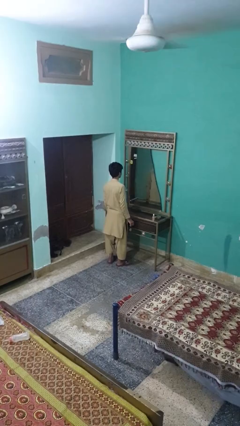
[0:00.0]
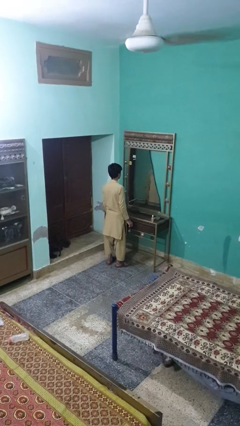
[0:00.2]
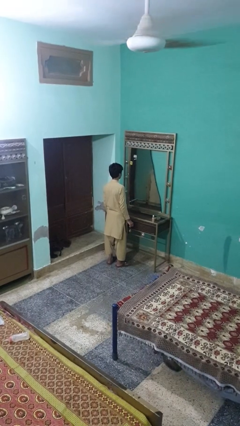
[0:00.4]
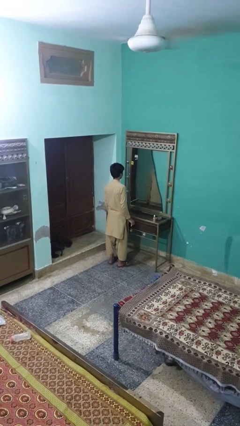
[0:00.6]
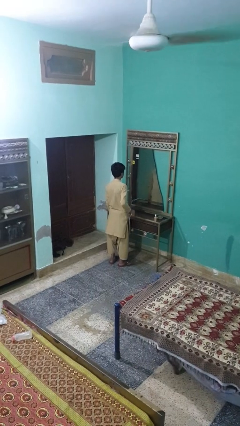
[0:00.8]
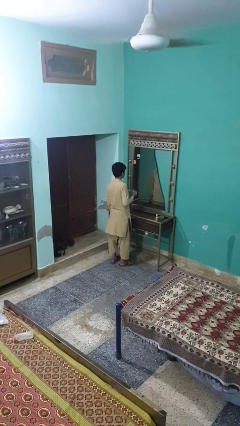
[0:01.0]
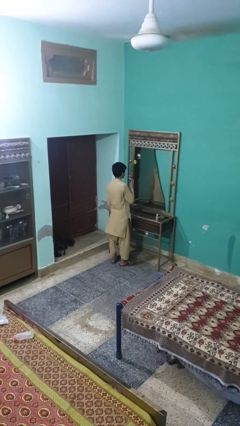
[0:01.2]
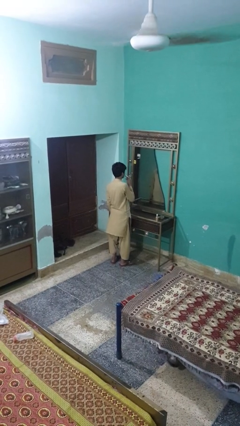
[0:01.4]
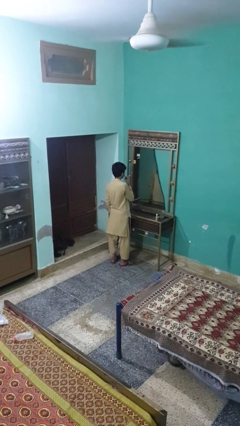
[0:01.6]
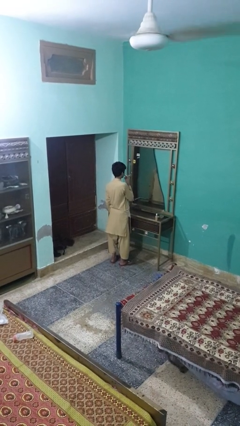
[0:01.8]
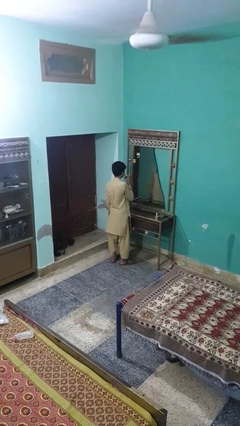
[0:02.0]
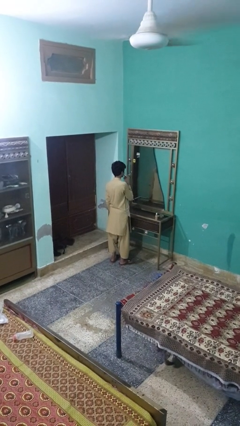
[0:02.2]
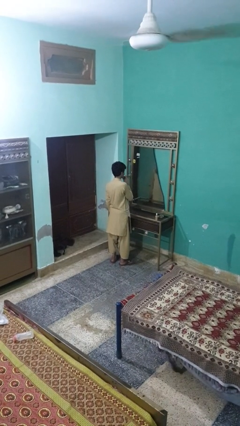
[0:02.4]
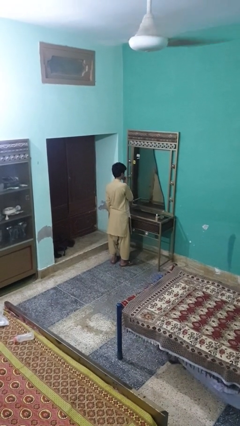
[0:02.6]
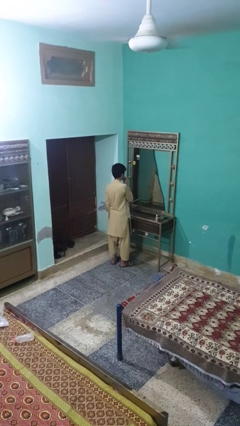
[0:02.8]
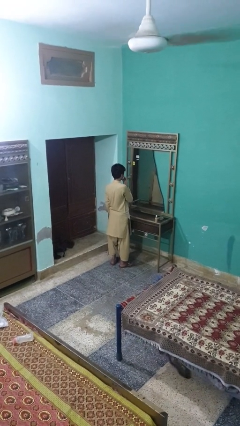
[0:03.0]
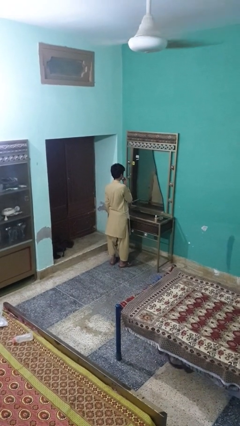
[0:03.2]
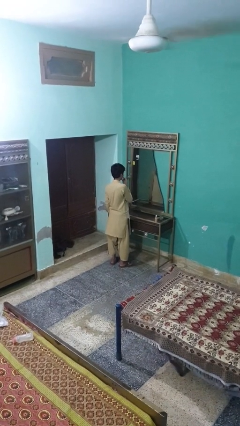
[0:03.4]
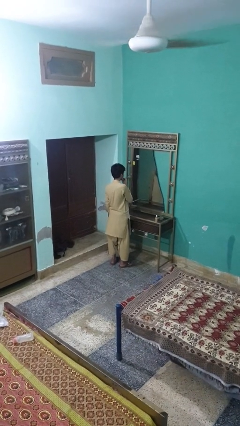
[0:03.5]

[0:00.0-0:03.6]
person applies lip makeup

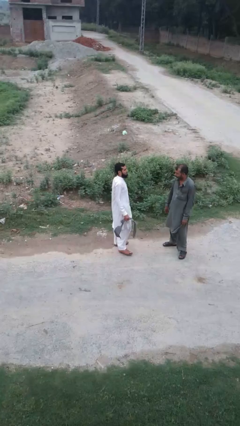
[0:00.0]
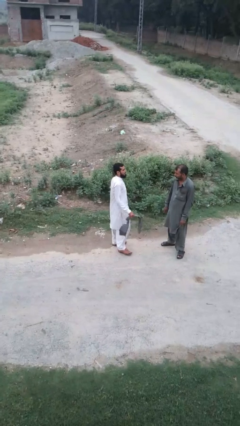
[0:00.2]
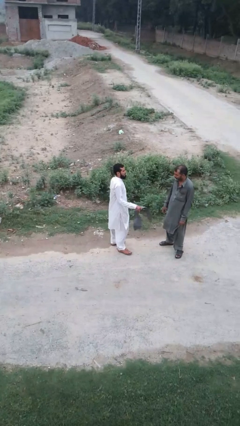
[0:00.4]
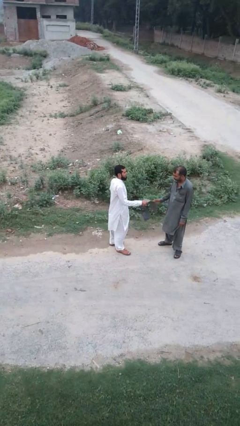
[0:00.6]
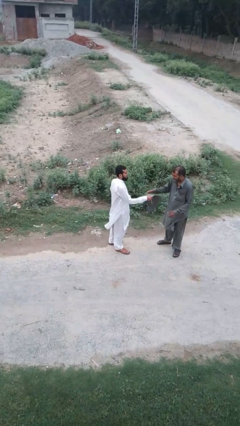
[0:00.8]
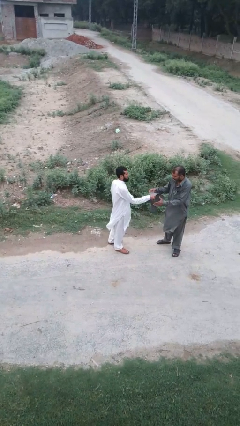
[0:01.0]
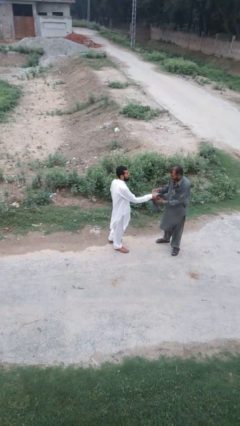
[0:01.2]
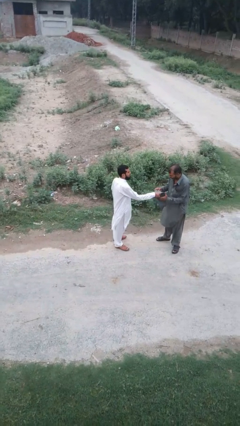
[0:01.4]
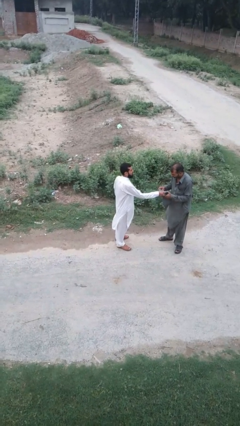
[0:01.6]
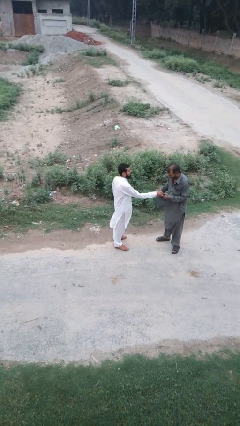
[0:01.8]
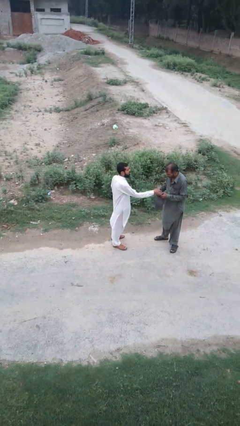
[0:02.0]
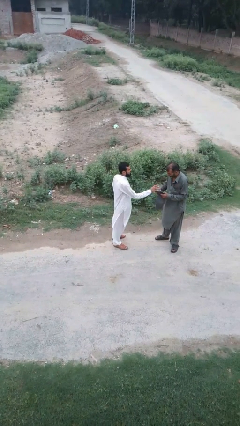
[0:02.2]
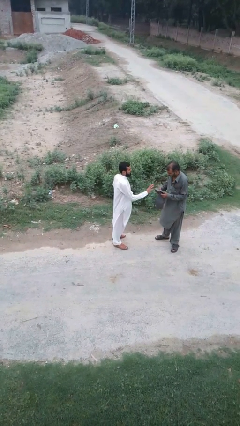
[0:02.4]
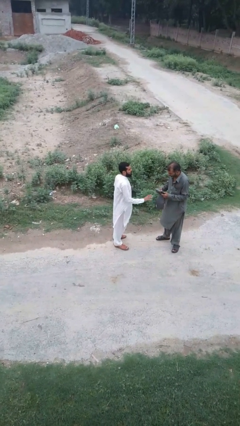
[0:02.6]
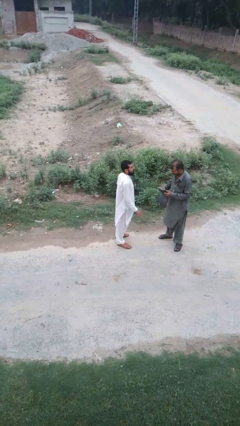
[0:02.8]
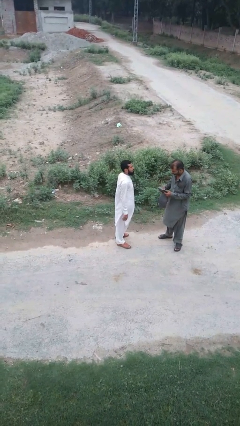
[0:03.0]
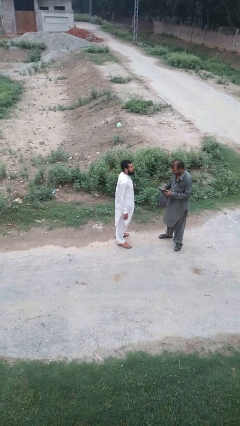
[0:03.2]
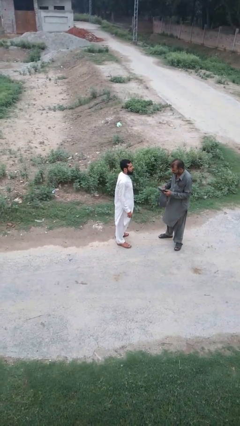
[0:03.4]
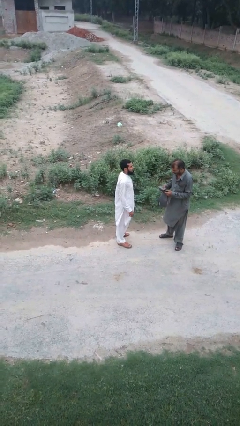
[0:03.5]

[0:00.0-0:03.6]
person transfers object to person

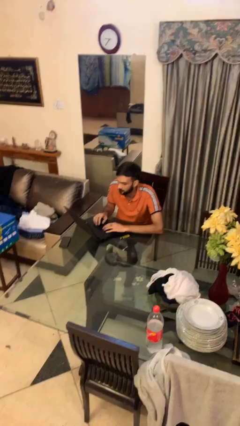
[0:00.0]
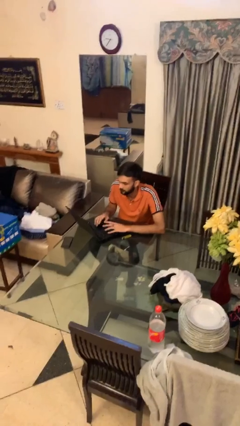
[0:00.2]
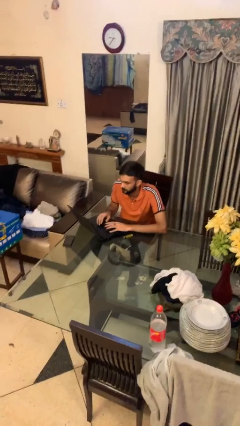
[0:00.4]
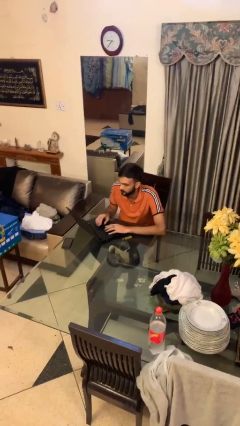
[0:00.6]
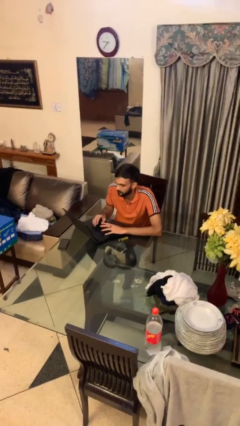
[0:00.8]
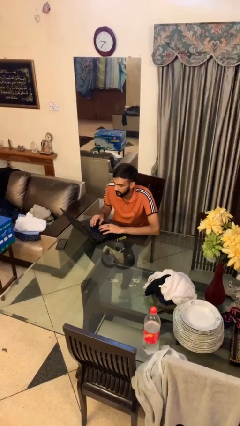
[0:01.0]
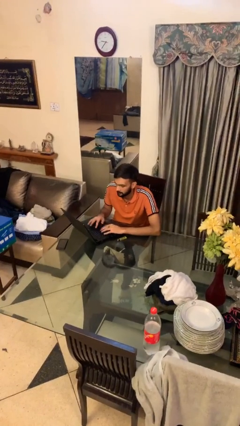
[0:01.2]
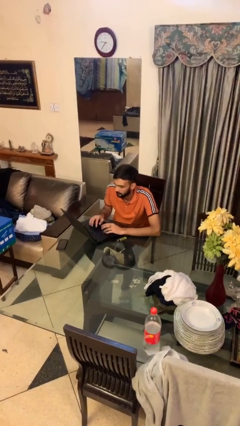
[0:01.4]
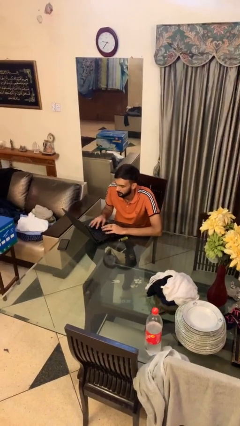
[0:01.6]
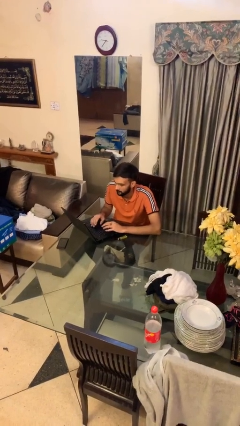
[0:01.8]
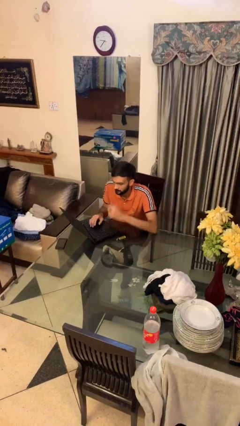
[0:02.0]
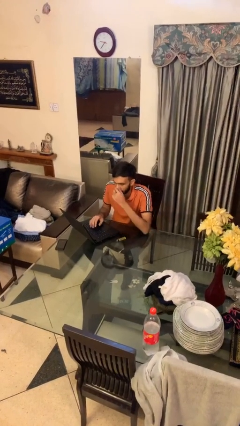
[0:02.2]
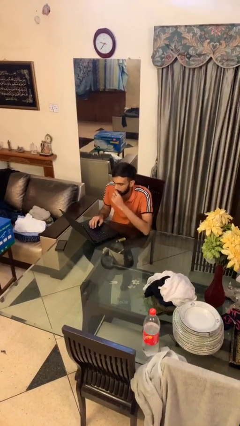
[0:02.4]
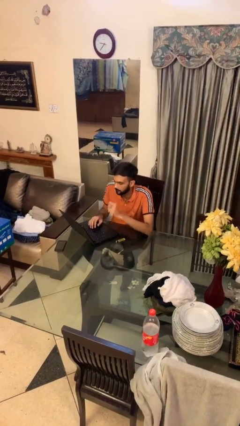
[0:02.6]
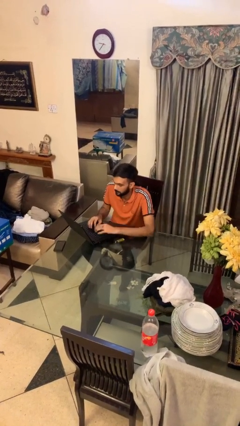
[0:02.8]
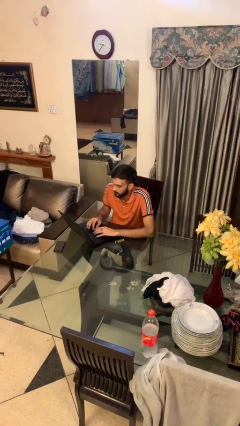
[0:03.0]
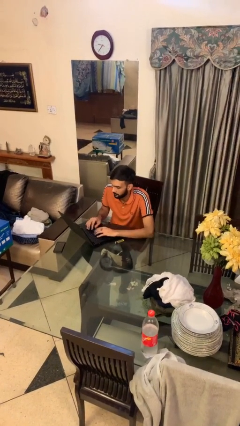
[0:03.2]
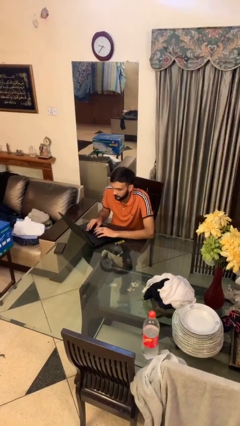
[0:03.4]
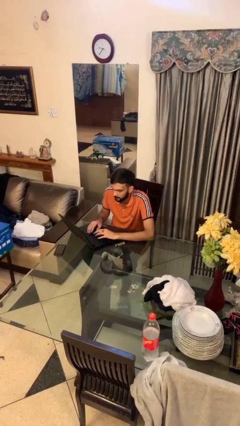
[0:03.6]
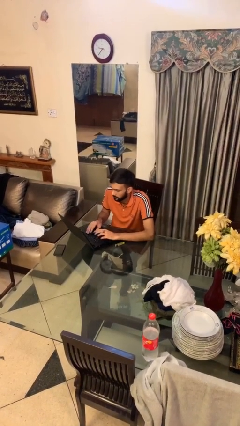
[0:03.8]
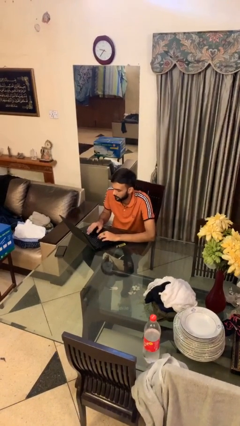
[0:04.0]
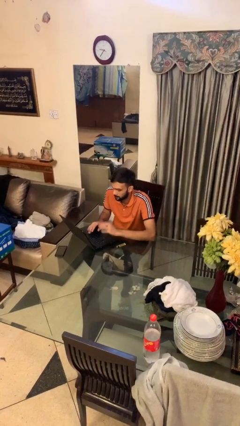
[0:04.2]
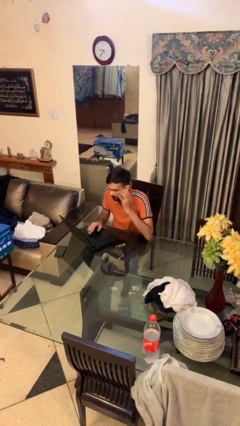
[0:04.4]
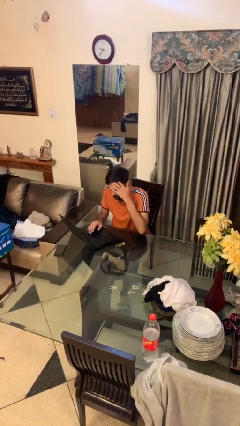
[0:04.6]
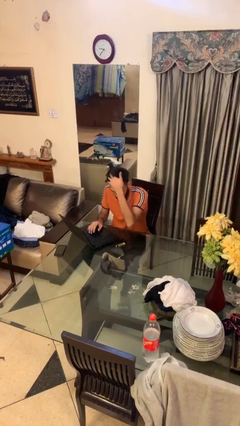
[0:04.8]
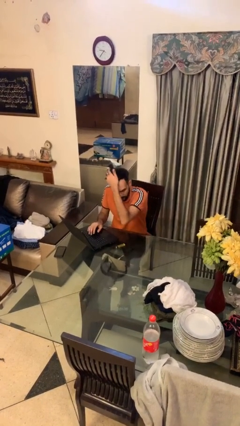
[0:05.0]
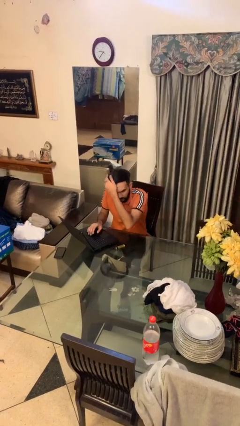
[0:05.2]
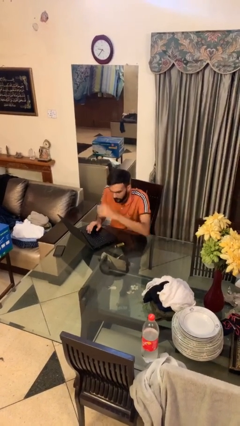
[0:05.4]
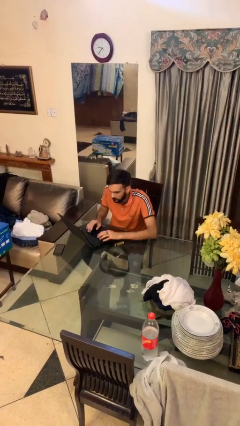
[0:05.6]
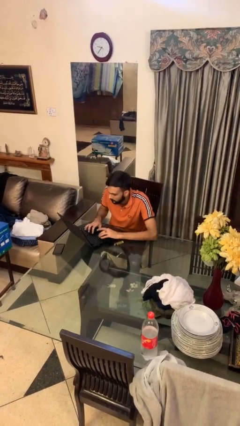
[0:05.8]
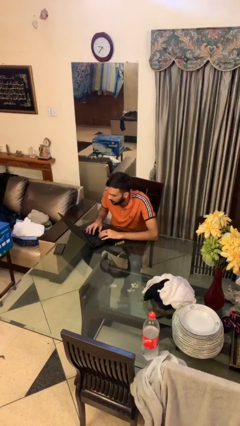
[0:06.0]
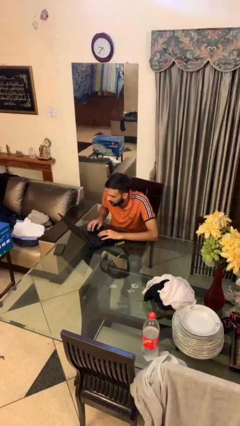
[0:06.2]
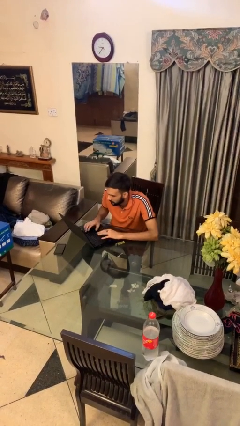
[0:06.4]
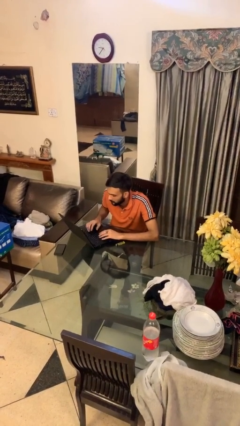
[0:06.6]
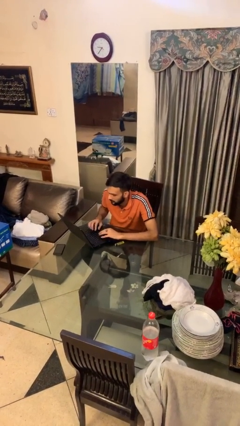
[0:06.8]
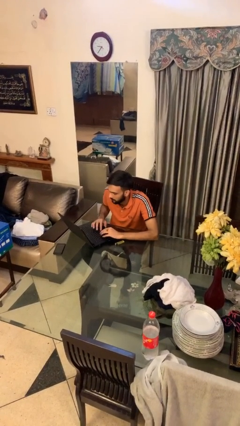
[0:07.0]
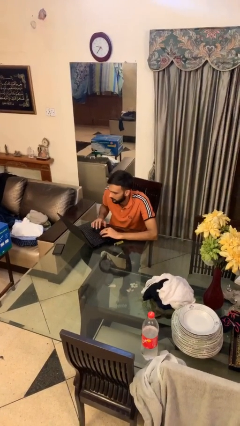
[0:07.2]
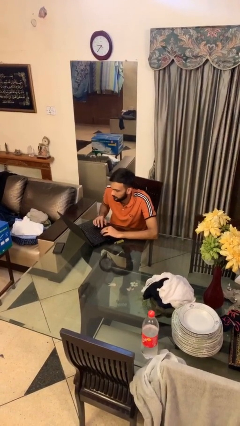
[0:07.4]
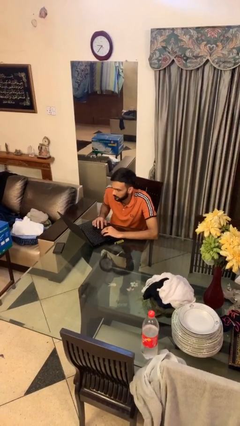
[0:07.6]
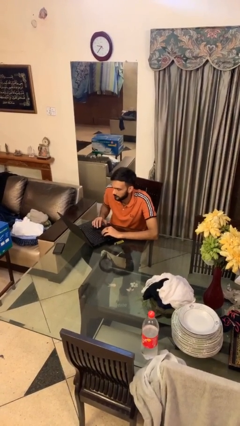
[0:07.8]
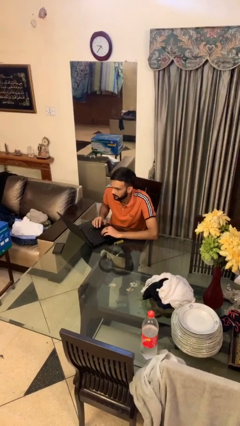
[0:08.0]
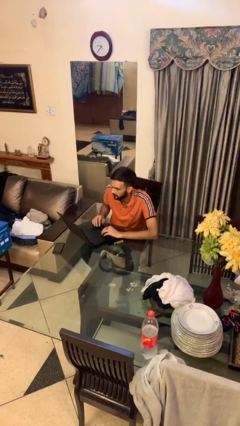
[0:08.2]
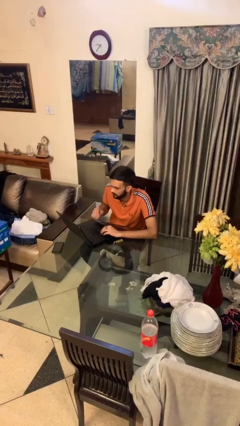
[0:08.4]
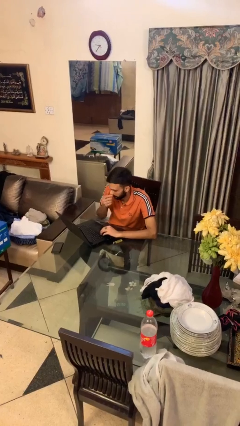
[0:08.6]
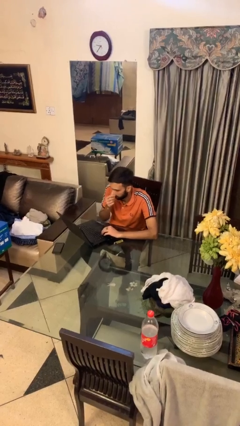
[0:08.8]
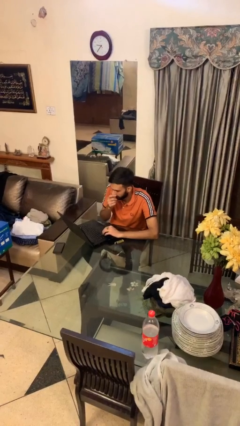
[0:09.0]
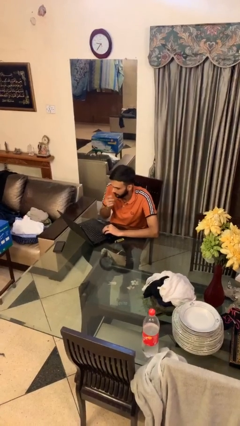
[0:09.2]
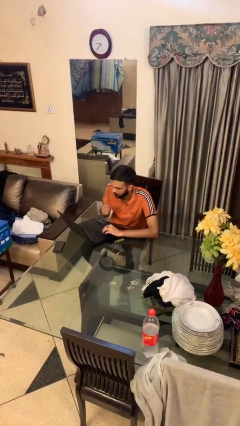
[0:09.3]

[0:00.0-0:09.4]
person interacts with laptop

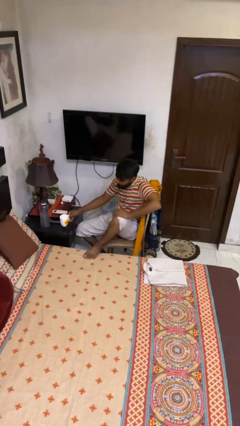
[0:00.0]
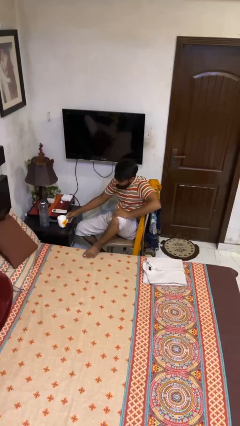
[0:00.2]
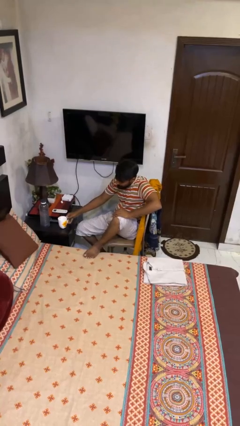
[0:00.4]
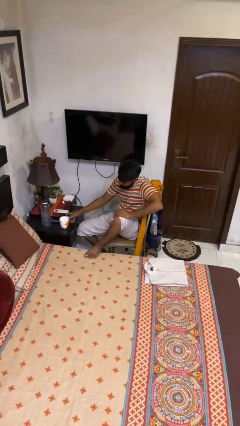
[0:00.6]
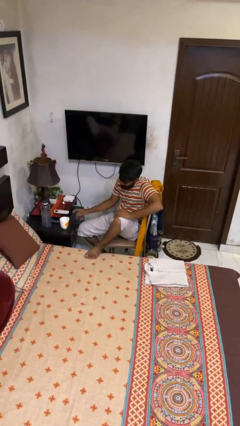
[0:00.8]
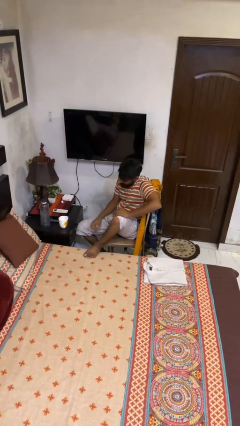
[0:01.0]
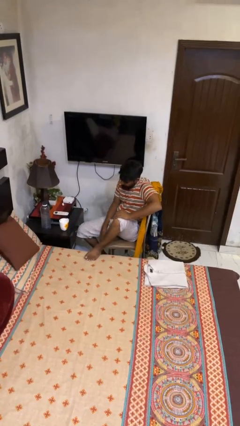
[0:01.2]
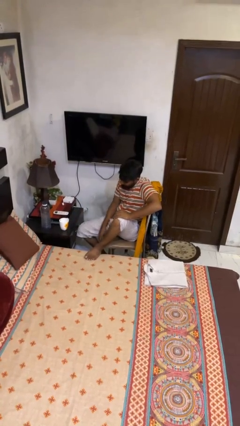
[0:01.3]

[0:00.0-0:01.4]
person puts down object on table
